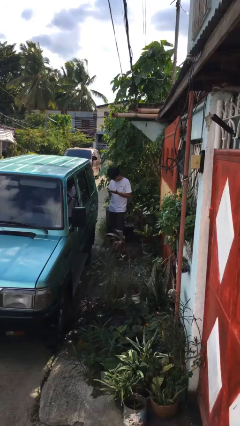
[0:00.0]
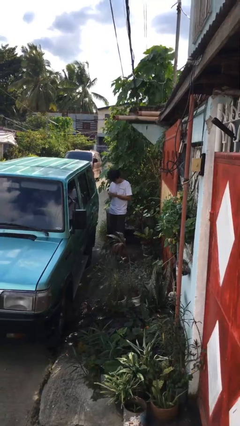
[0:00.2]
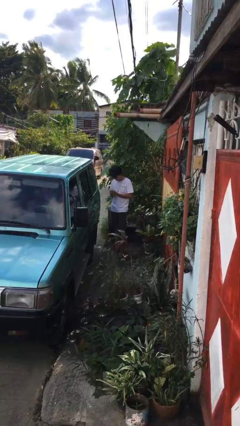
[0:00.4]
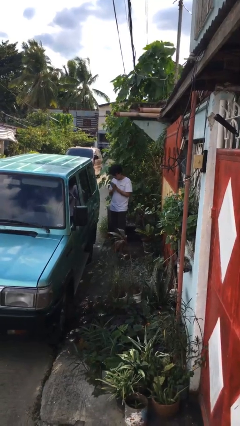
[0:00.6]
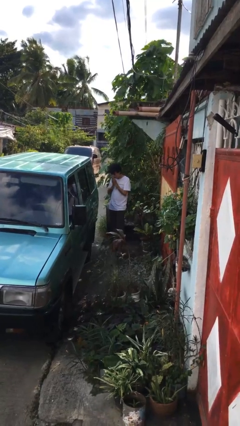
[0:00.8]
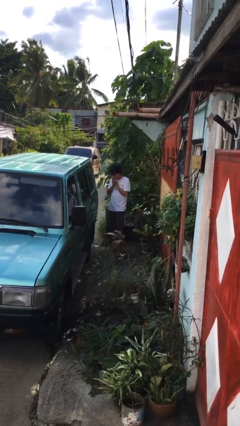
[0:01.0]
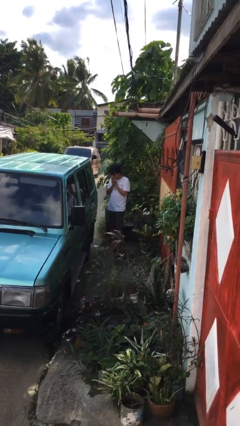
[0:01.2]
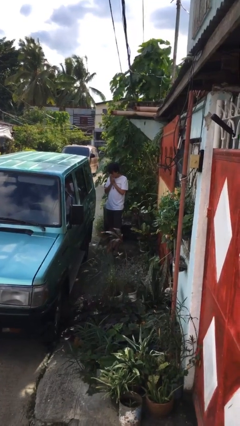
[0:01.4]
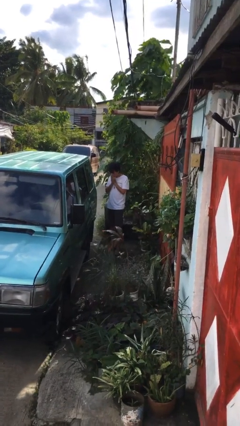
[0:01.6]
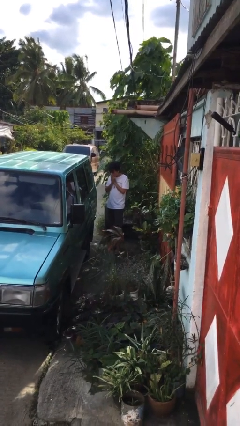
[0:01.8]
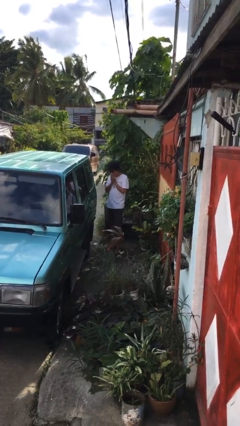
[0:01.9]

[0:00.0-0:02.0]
person blows into hands

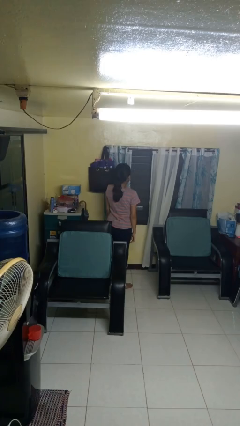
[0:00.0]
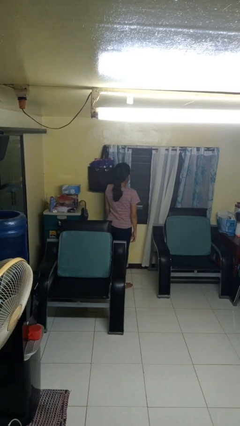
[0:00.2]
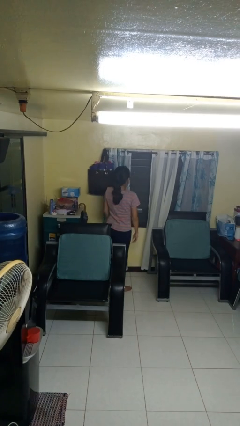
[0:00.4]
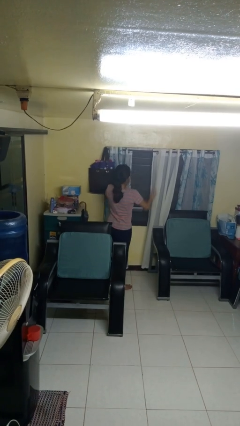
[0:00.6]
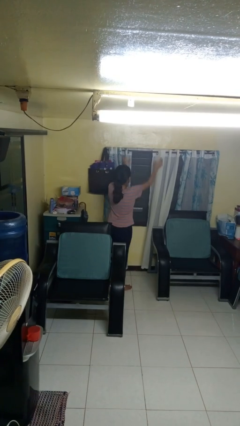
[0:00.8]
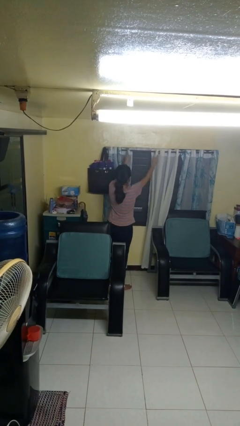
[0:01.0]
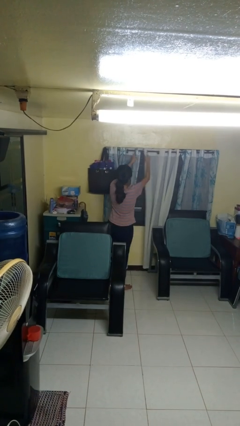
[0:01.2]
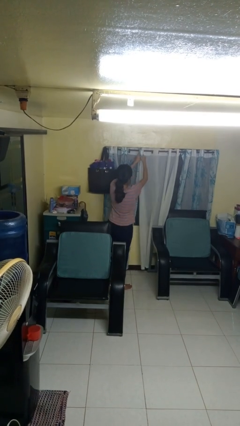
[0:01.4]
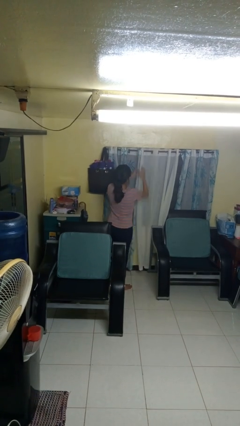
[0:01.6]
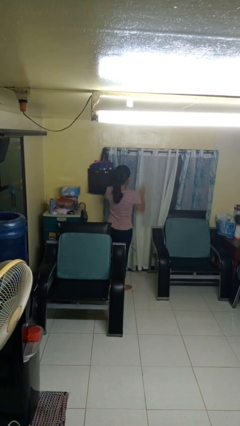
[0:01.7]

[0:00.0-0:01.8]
person closes curtains

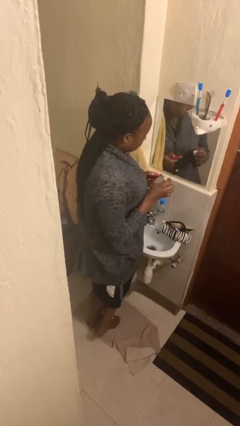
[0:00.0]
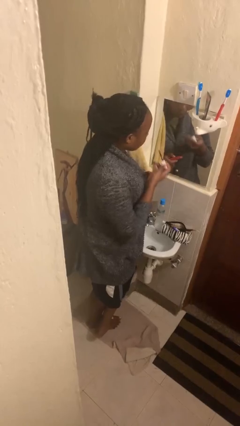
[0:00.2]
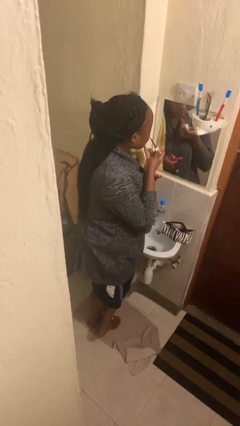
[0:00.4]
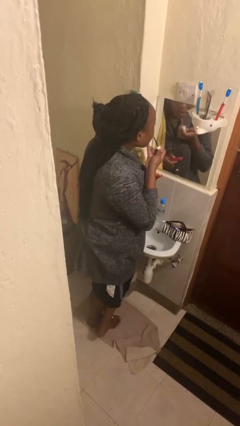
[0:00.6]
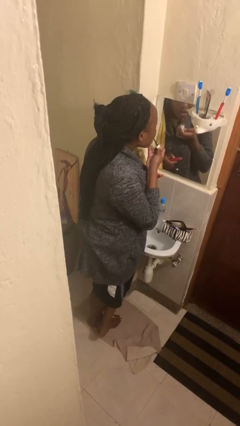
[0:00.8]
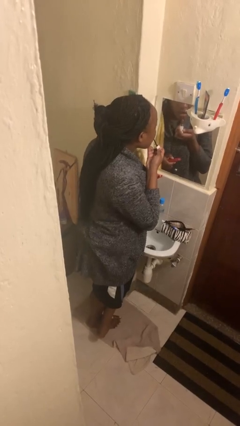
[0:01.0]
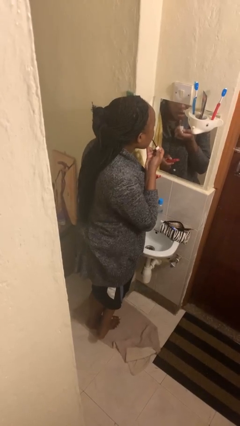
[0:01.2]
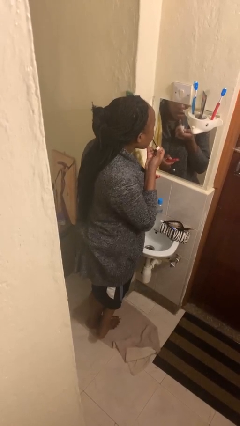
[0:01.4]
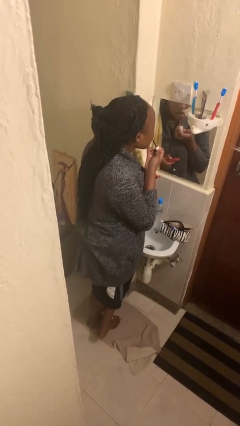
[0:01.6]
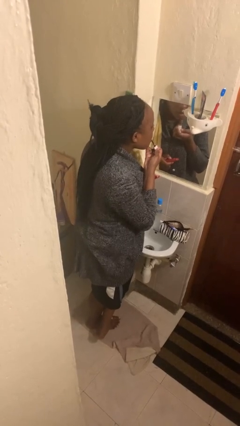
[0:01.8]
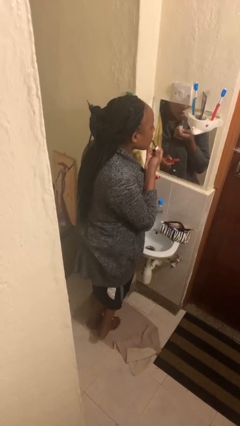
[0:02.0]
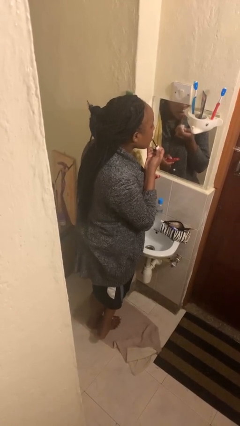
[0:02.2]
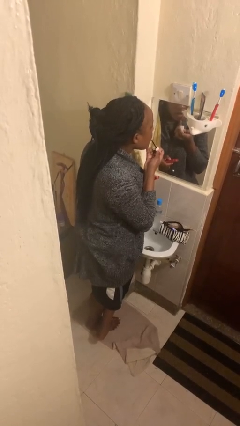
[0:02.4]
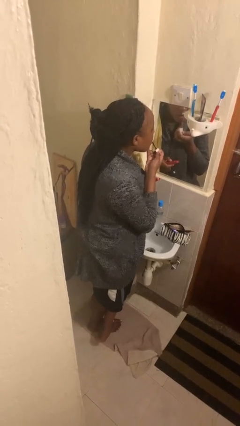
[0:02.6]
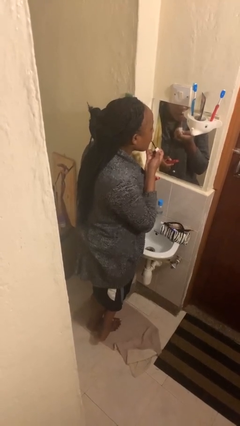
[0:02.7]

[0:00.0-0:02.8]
person applies lip makeup

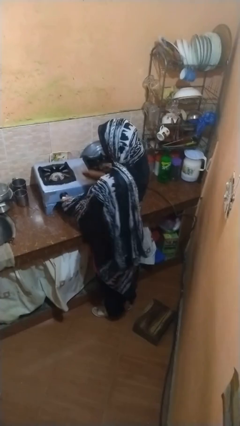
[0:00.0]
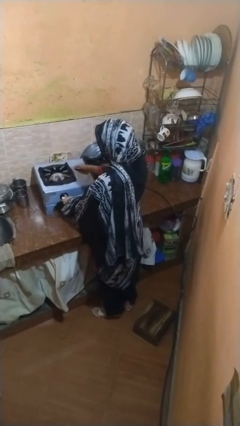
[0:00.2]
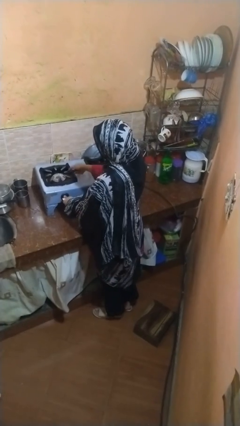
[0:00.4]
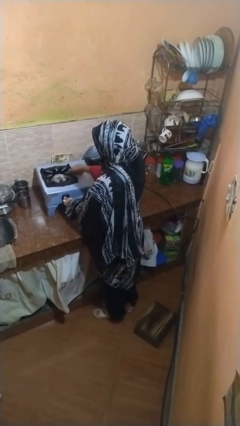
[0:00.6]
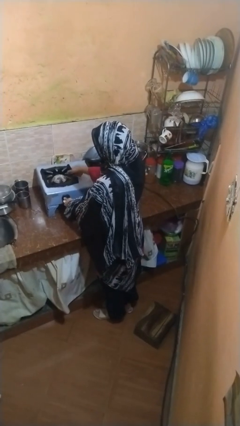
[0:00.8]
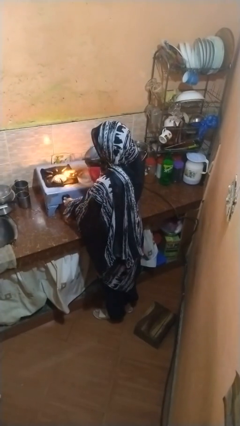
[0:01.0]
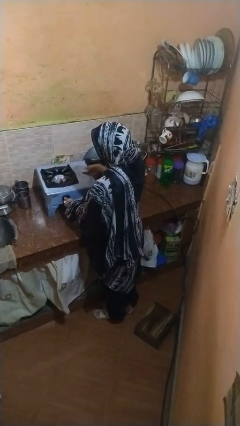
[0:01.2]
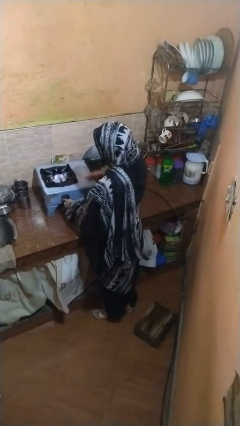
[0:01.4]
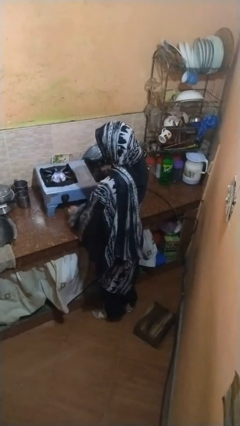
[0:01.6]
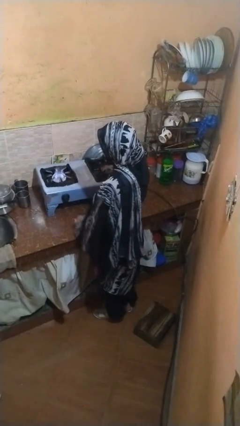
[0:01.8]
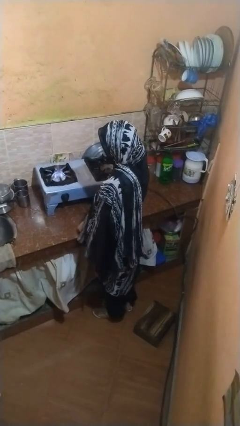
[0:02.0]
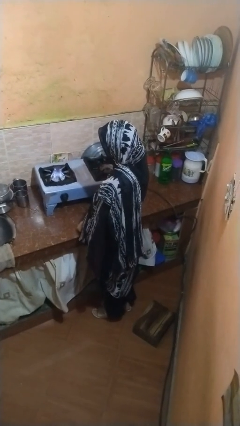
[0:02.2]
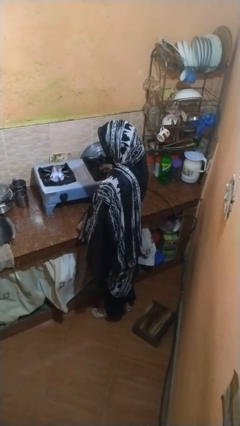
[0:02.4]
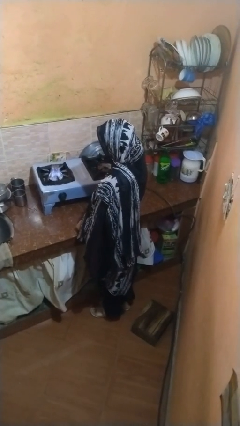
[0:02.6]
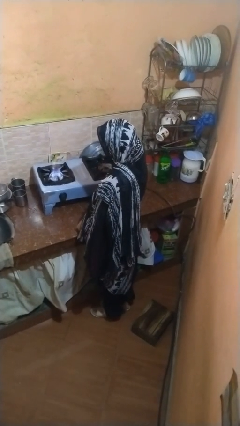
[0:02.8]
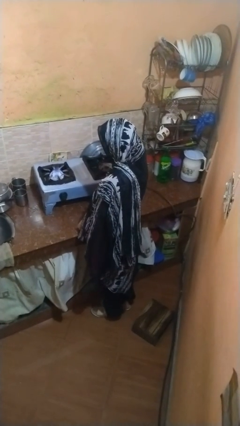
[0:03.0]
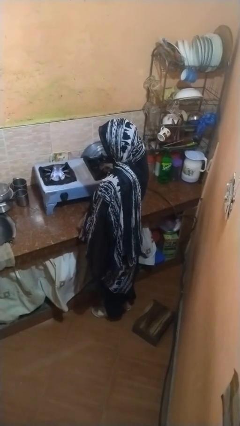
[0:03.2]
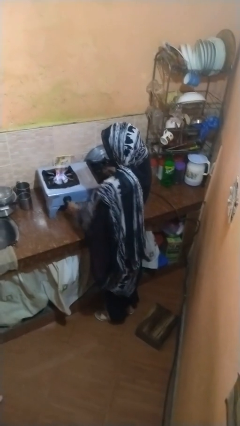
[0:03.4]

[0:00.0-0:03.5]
person turns on stovetop

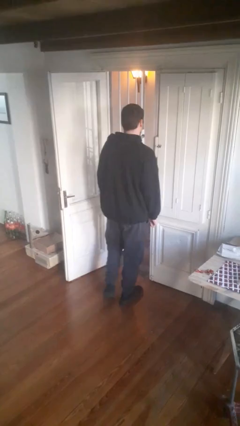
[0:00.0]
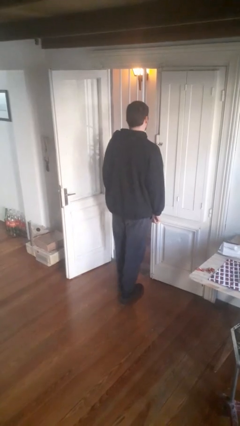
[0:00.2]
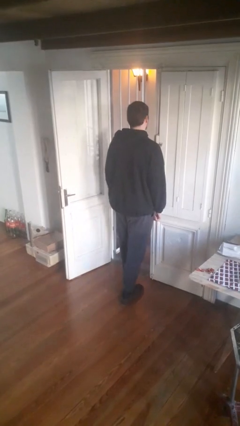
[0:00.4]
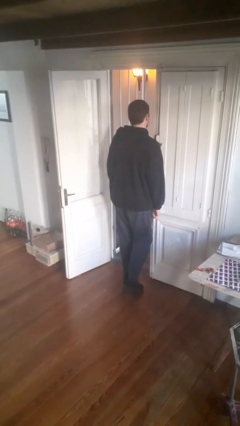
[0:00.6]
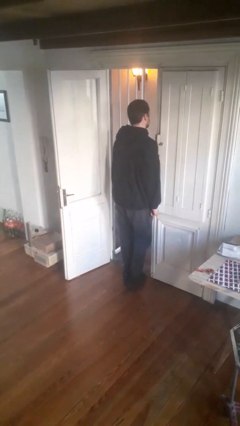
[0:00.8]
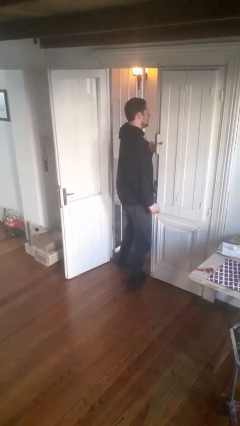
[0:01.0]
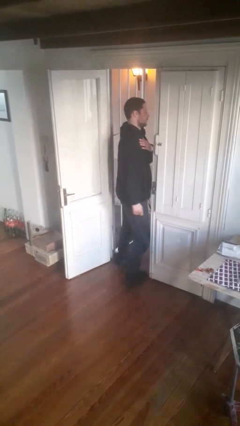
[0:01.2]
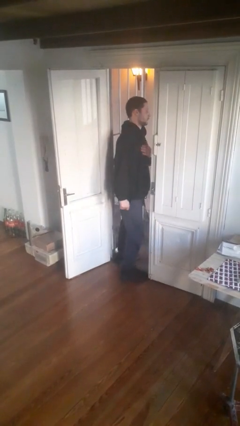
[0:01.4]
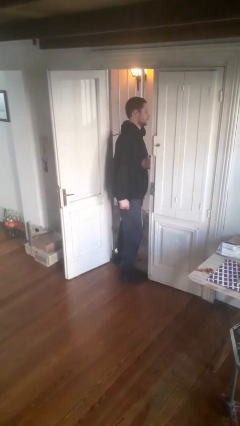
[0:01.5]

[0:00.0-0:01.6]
person bumps into wall

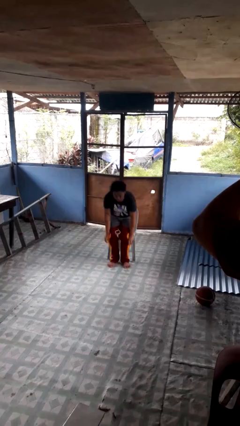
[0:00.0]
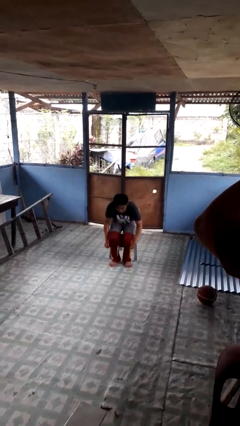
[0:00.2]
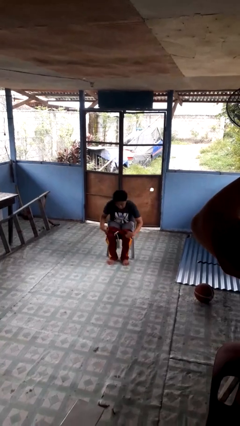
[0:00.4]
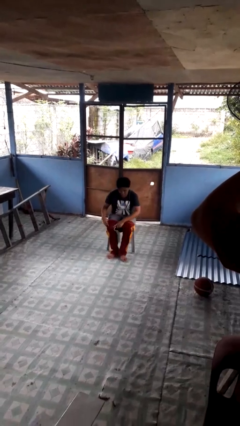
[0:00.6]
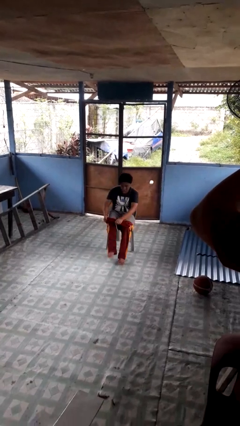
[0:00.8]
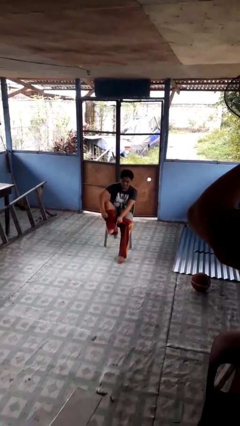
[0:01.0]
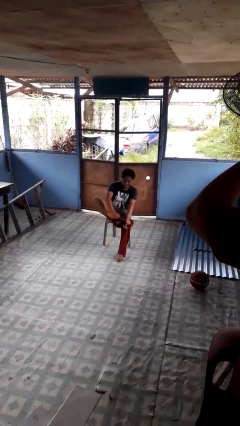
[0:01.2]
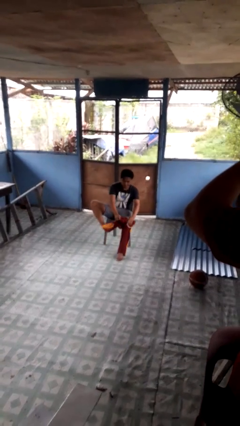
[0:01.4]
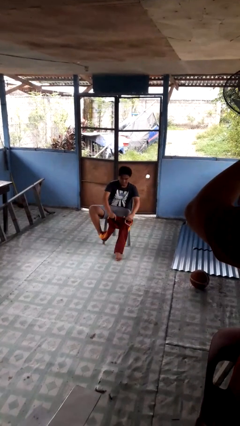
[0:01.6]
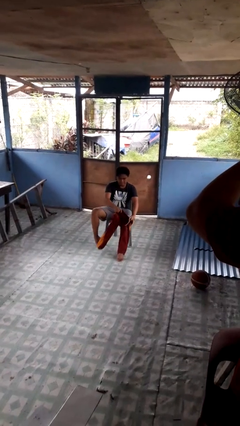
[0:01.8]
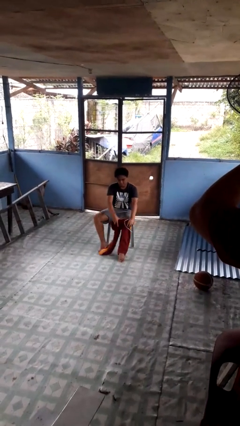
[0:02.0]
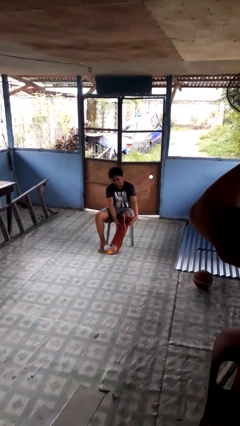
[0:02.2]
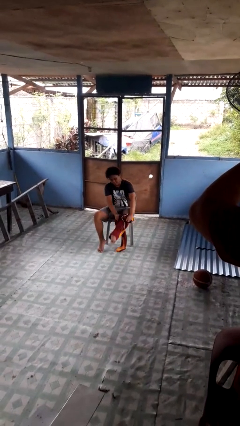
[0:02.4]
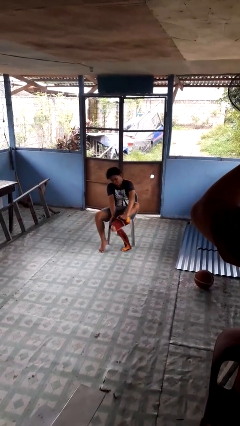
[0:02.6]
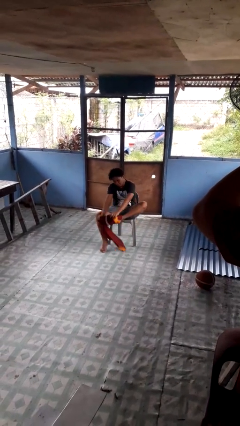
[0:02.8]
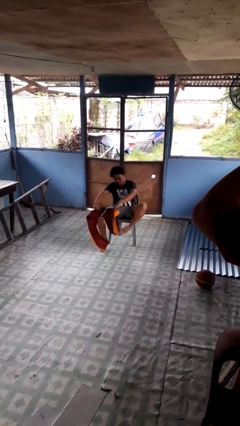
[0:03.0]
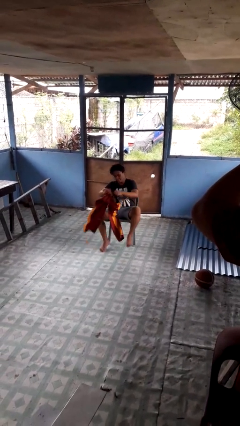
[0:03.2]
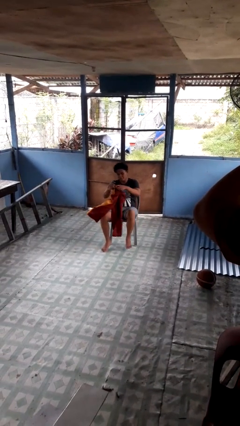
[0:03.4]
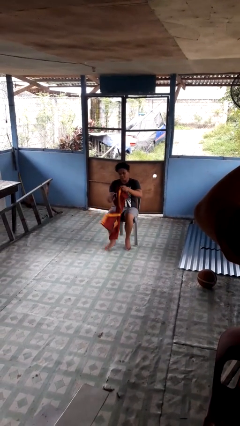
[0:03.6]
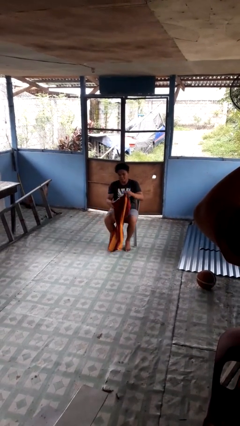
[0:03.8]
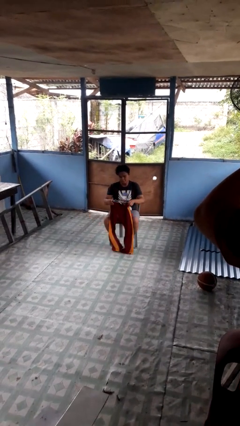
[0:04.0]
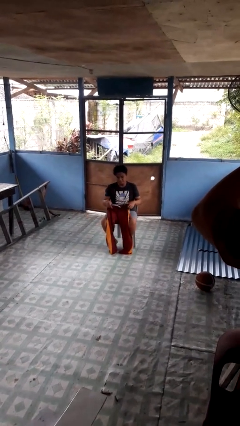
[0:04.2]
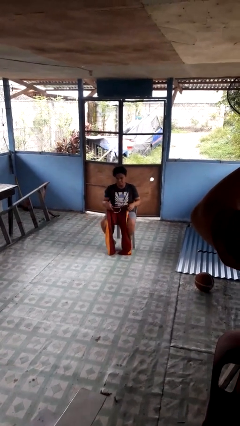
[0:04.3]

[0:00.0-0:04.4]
person takes off pants

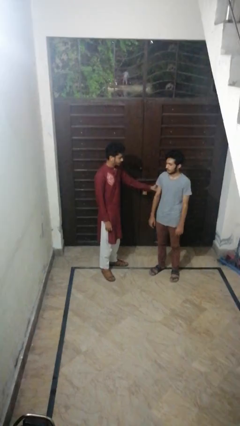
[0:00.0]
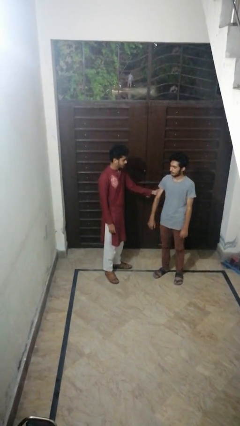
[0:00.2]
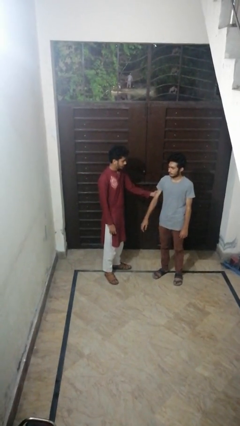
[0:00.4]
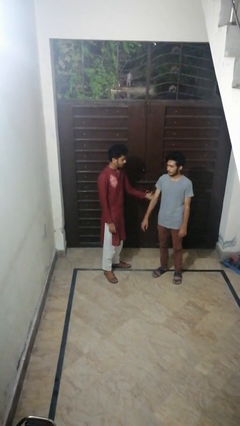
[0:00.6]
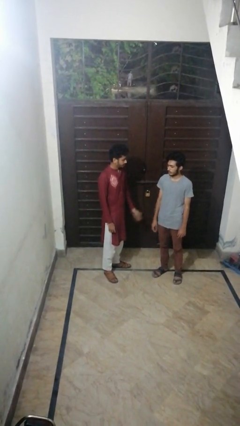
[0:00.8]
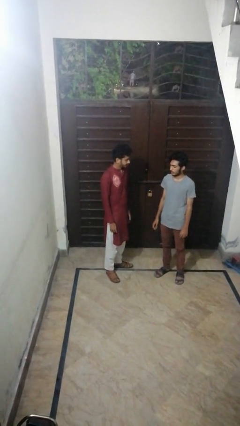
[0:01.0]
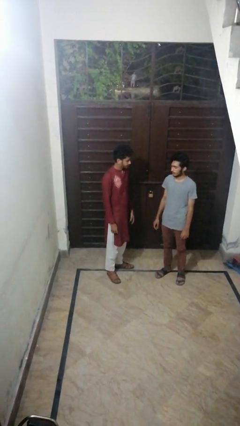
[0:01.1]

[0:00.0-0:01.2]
person grabs person by bicep
